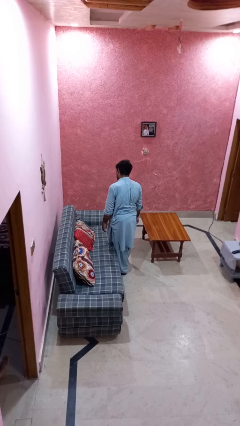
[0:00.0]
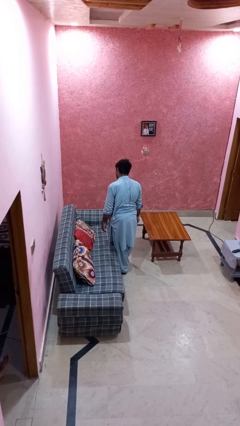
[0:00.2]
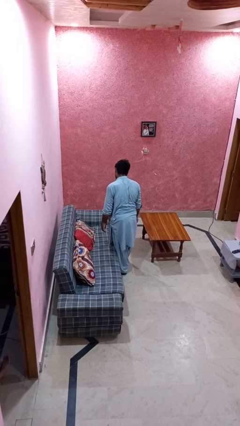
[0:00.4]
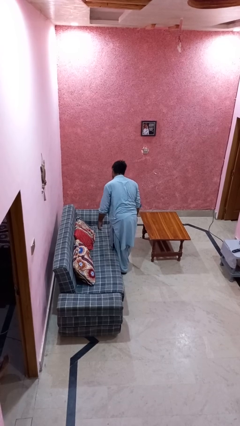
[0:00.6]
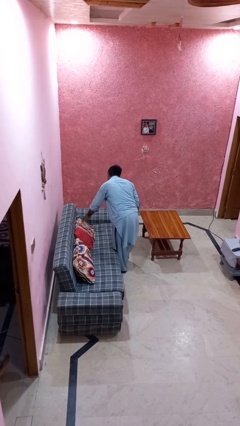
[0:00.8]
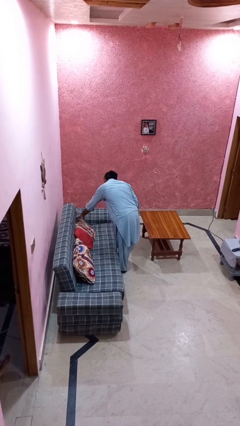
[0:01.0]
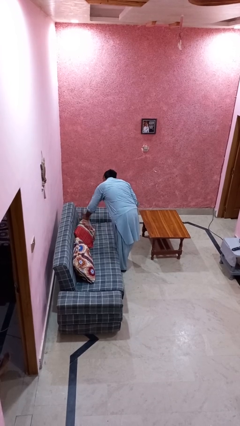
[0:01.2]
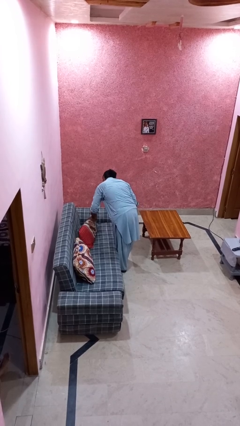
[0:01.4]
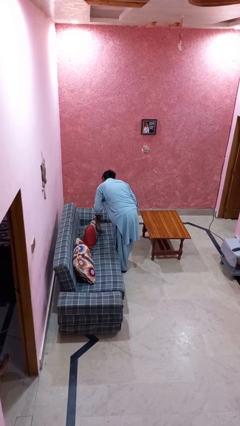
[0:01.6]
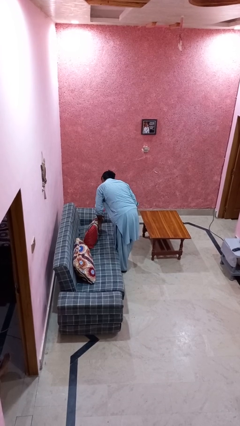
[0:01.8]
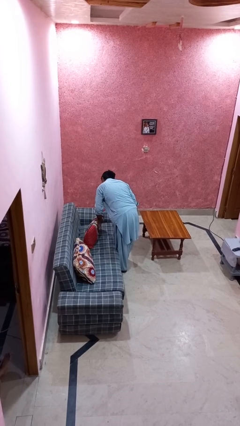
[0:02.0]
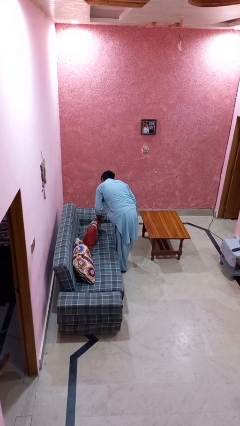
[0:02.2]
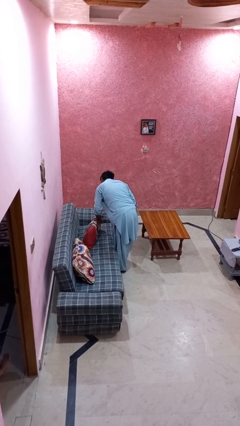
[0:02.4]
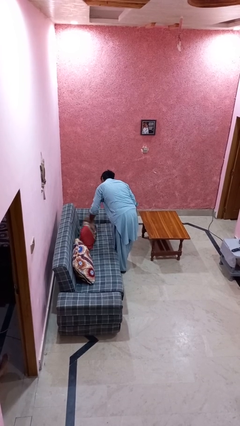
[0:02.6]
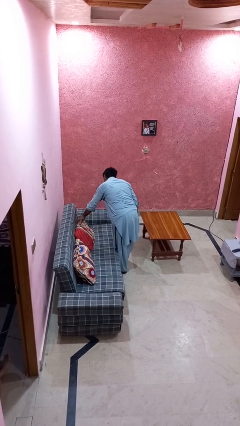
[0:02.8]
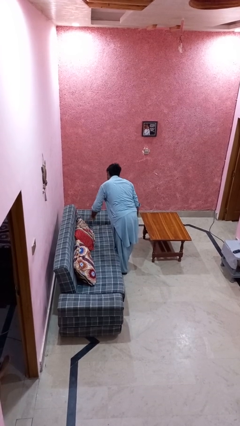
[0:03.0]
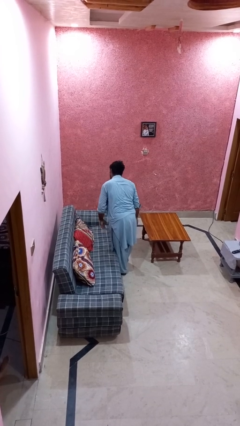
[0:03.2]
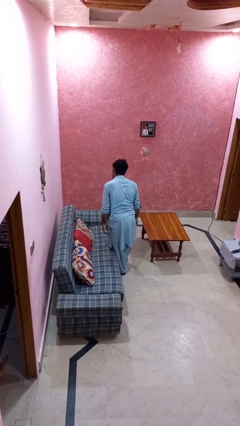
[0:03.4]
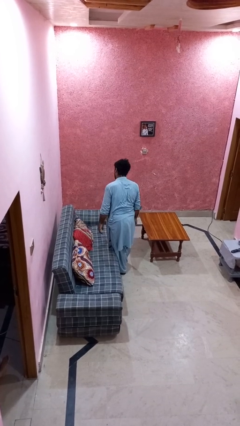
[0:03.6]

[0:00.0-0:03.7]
person searches in couch

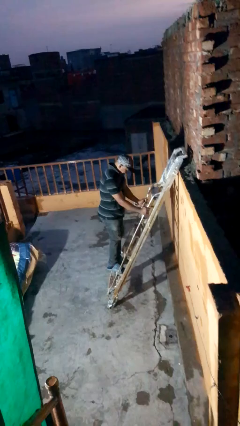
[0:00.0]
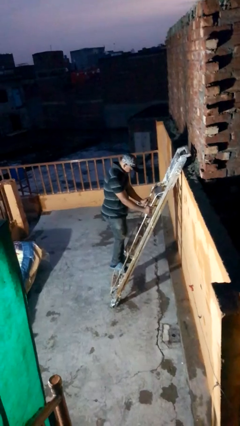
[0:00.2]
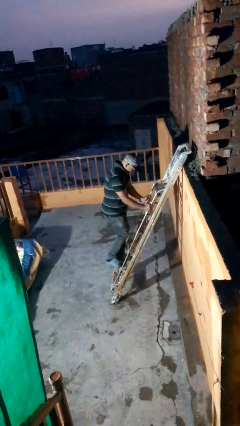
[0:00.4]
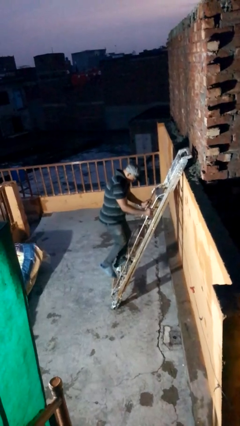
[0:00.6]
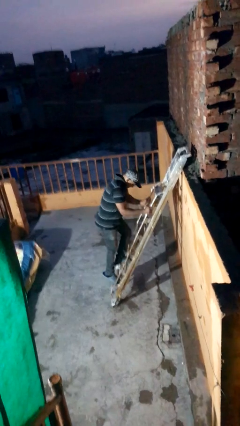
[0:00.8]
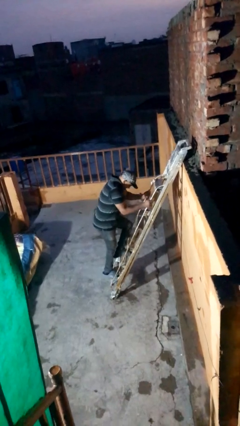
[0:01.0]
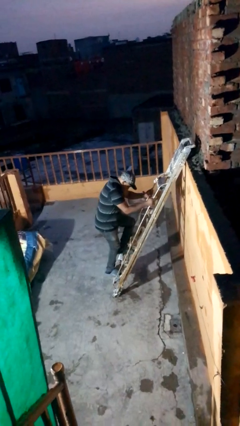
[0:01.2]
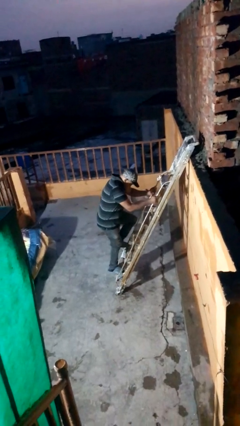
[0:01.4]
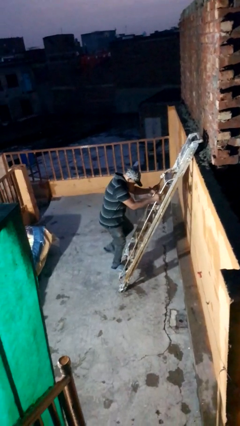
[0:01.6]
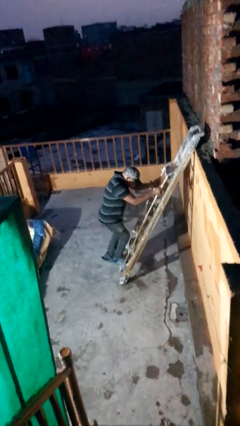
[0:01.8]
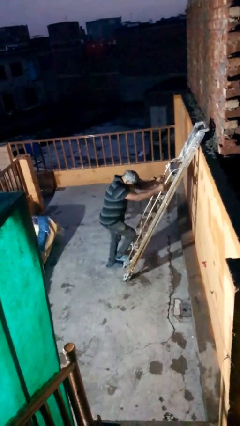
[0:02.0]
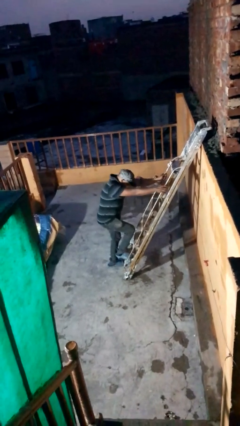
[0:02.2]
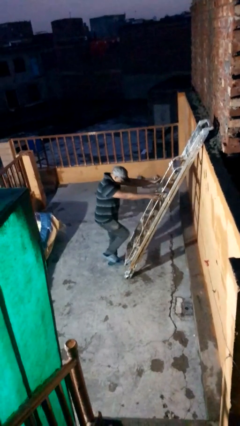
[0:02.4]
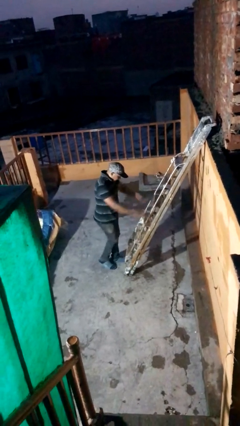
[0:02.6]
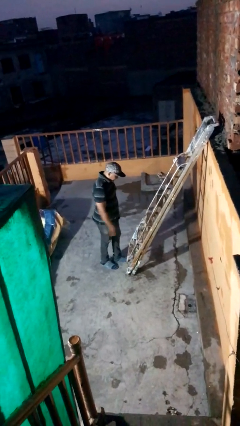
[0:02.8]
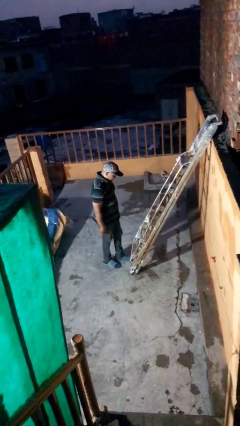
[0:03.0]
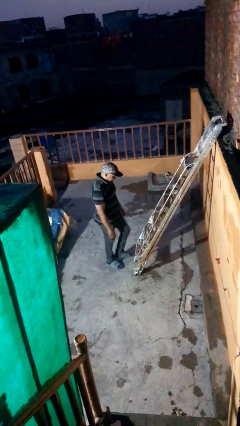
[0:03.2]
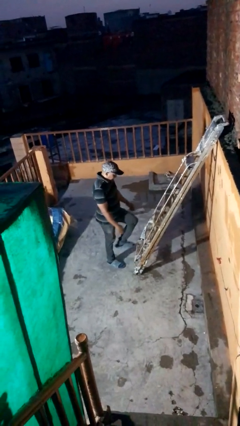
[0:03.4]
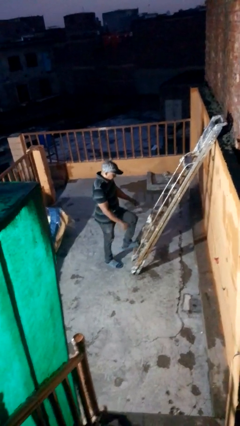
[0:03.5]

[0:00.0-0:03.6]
person climbs down ladder

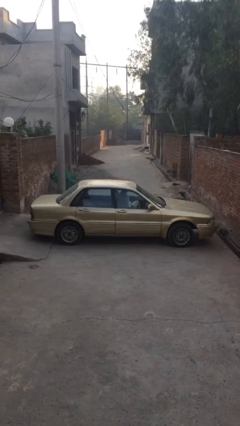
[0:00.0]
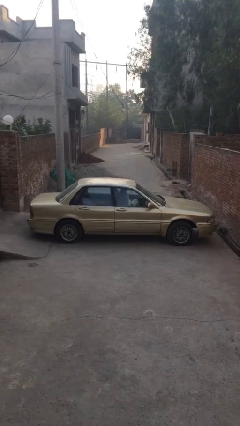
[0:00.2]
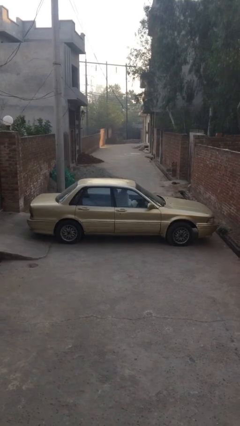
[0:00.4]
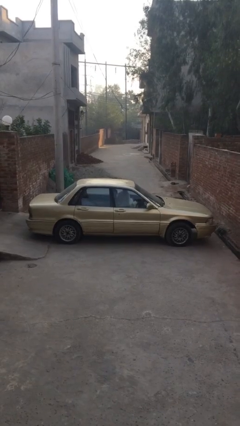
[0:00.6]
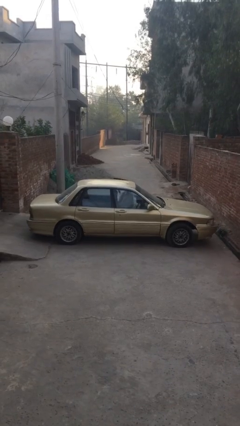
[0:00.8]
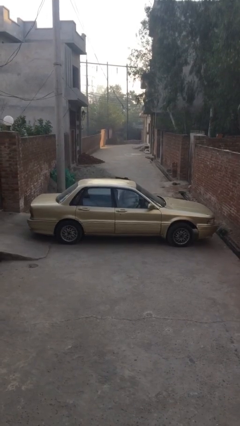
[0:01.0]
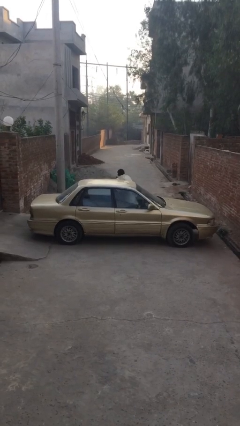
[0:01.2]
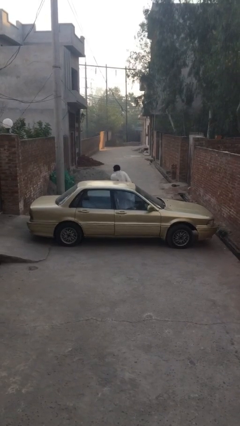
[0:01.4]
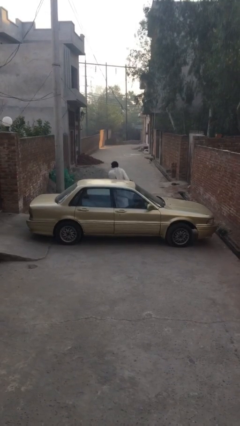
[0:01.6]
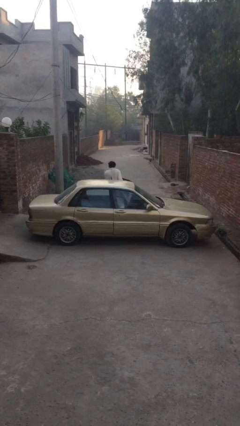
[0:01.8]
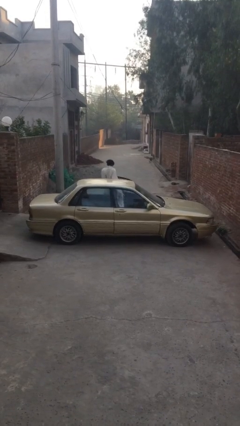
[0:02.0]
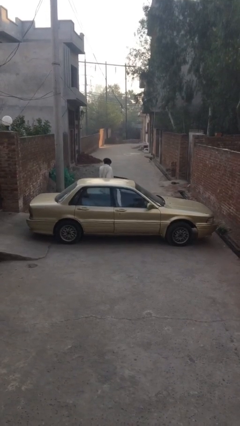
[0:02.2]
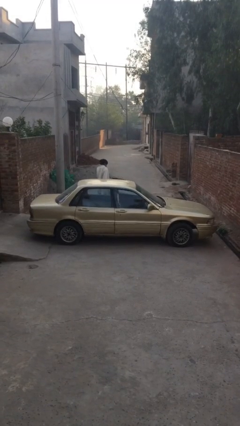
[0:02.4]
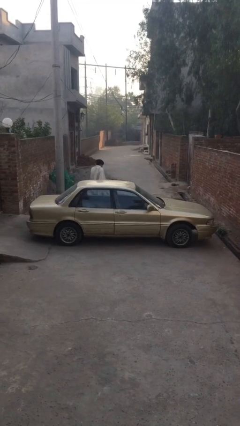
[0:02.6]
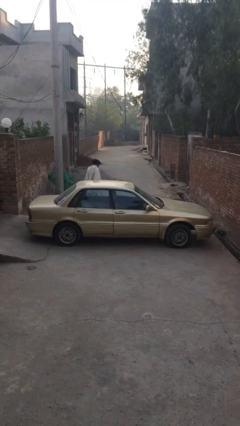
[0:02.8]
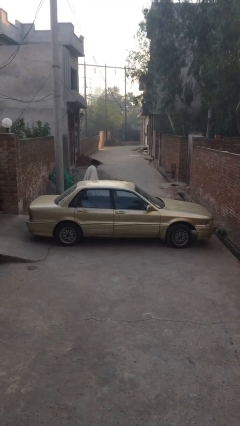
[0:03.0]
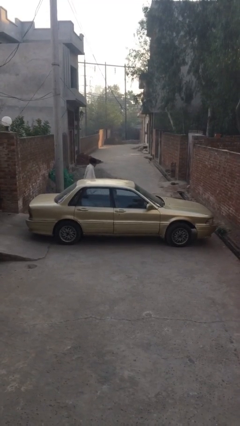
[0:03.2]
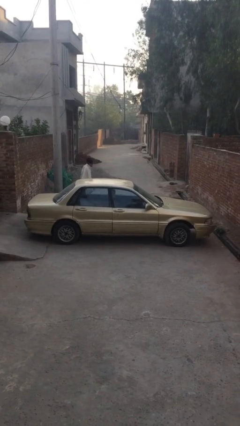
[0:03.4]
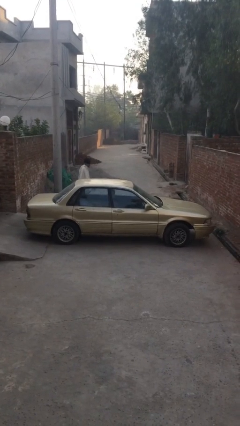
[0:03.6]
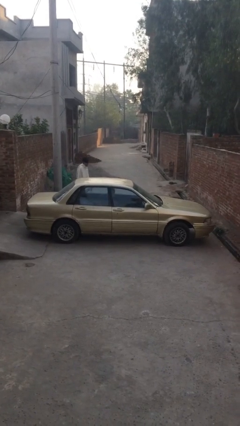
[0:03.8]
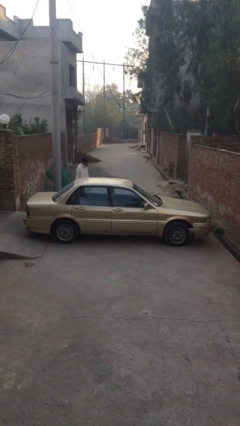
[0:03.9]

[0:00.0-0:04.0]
car drops off person

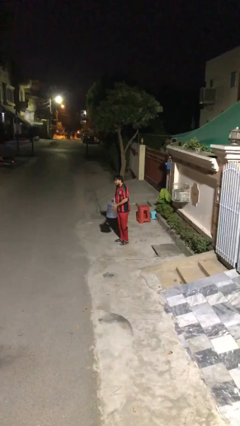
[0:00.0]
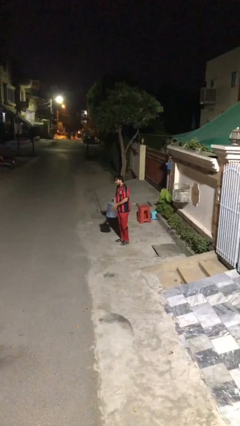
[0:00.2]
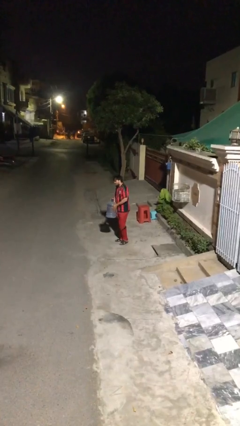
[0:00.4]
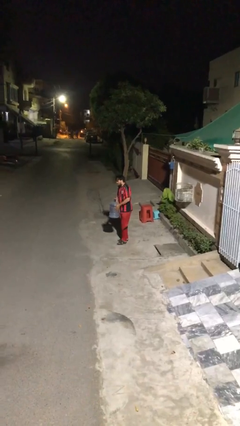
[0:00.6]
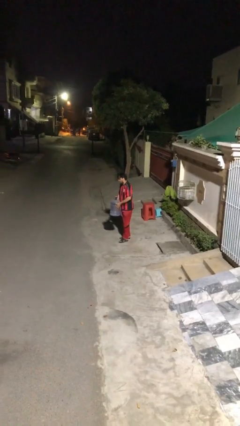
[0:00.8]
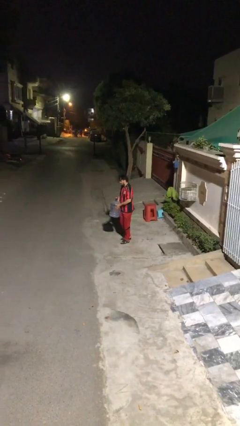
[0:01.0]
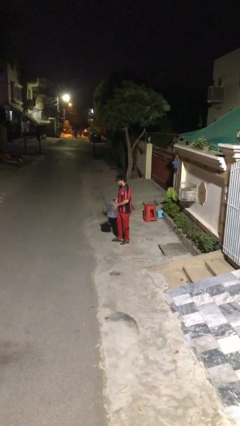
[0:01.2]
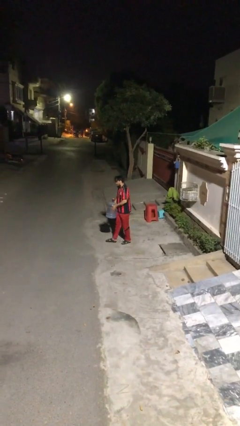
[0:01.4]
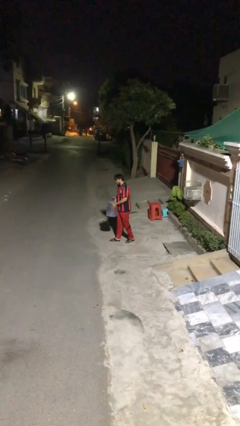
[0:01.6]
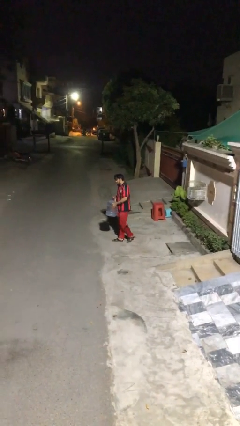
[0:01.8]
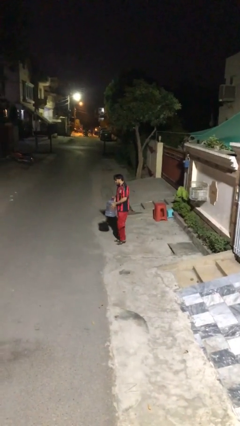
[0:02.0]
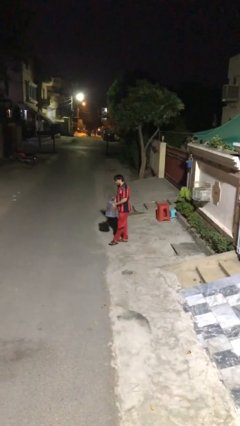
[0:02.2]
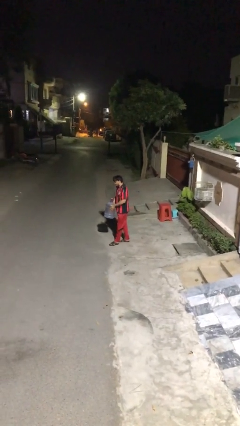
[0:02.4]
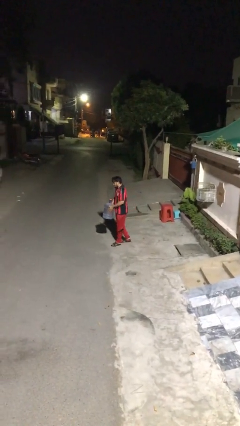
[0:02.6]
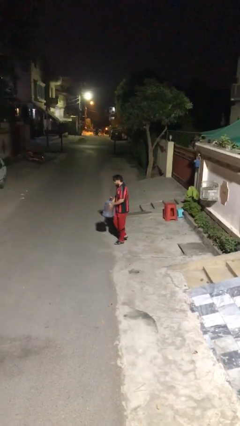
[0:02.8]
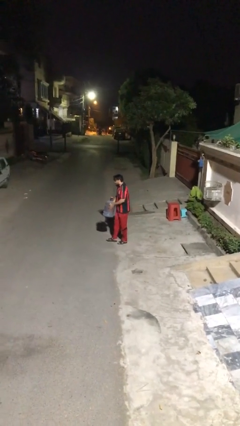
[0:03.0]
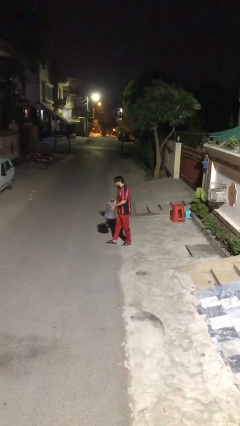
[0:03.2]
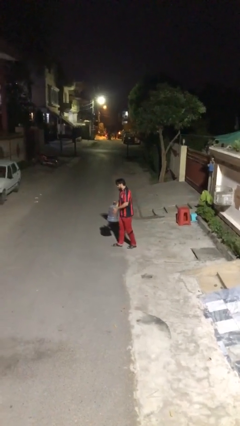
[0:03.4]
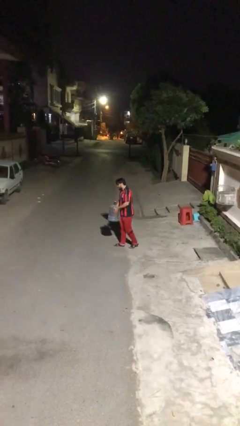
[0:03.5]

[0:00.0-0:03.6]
person carries heavy object

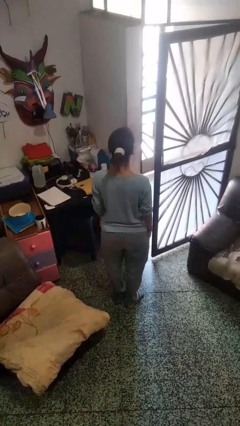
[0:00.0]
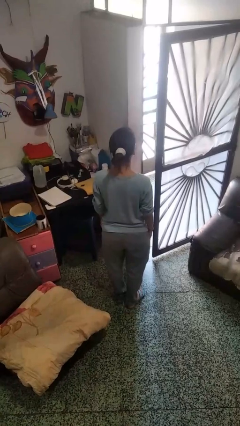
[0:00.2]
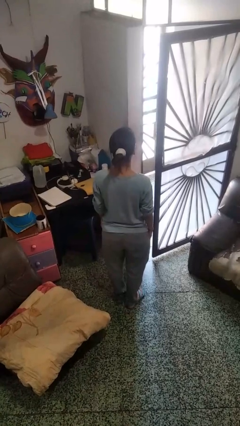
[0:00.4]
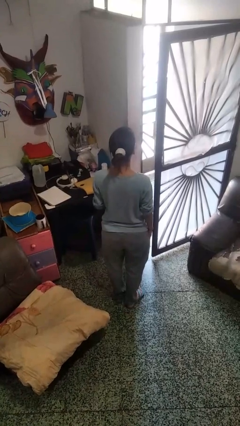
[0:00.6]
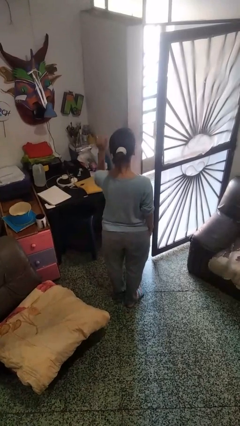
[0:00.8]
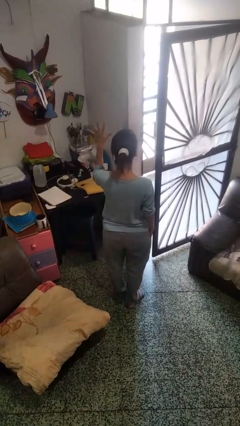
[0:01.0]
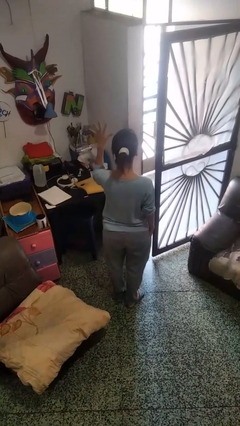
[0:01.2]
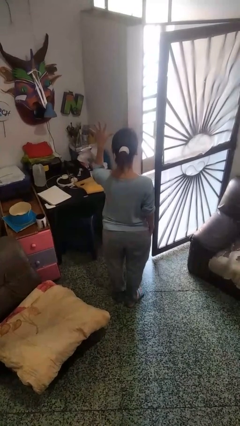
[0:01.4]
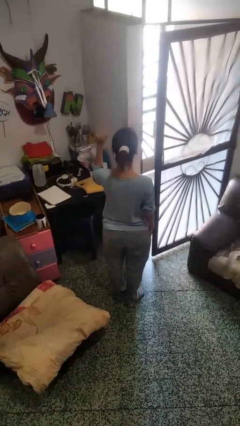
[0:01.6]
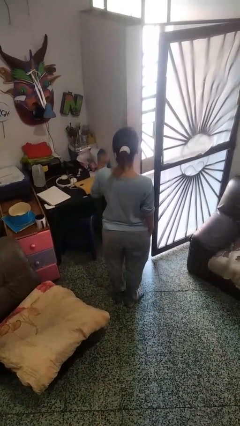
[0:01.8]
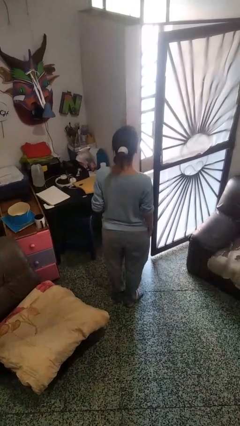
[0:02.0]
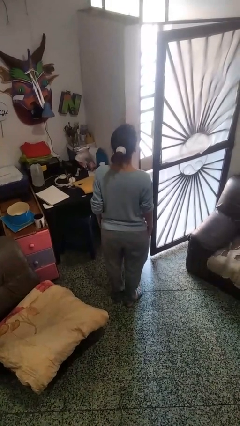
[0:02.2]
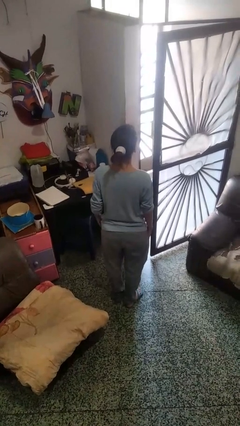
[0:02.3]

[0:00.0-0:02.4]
person gestures number five

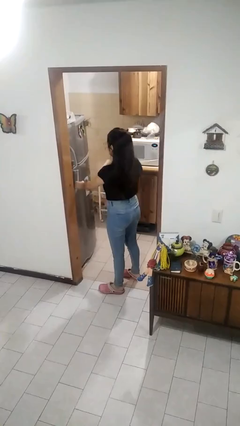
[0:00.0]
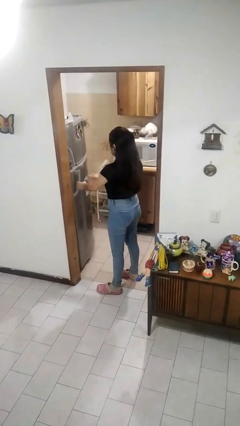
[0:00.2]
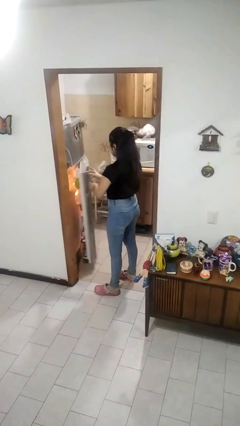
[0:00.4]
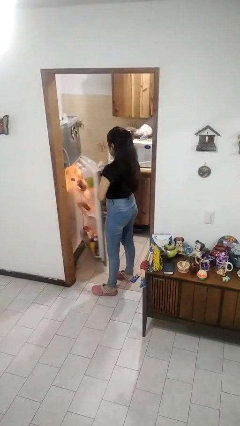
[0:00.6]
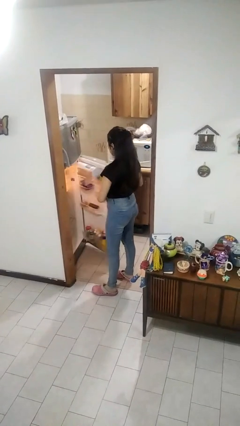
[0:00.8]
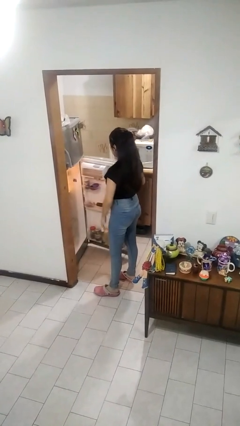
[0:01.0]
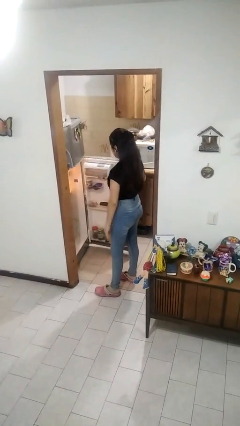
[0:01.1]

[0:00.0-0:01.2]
person opens refrigerator
